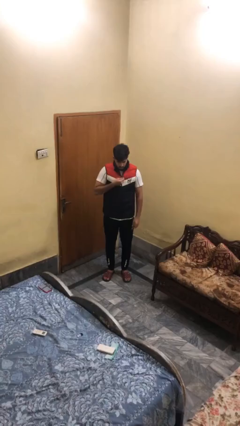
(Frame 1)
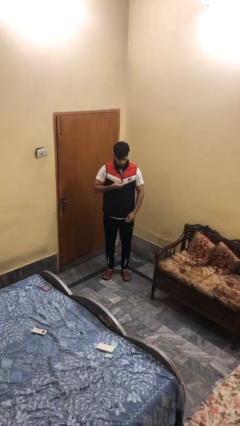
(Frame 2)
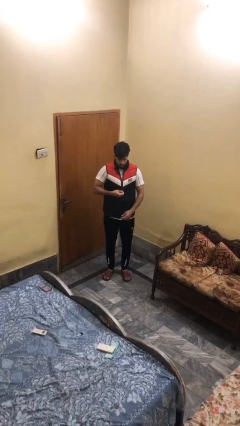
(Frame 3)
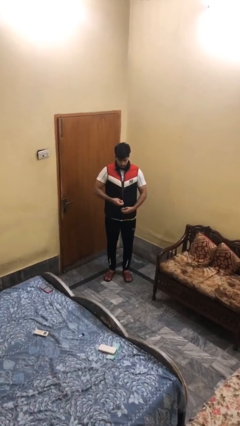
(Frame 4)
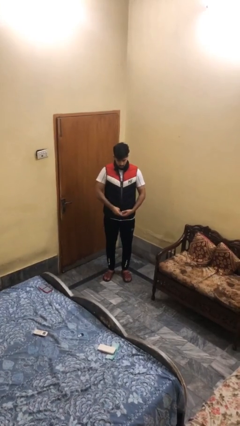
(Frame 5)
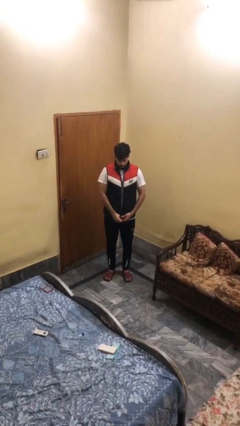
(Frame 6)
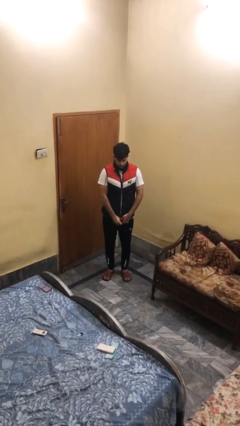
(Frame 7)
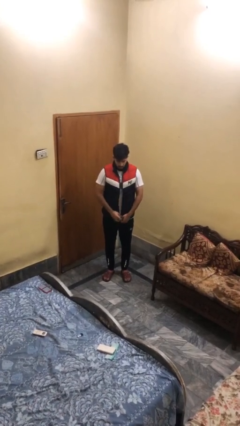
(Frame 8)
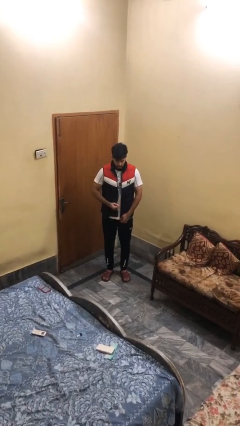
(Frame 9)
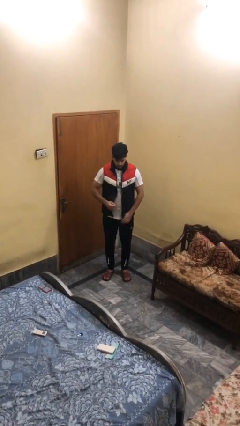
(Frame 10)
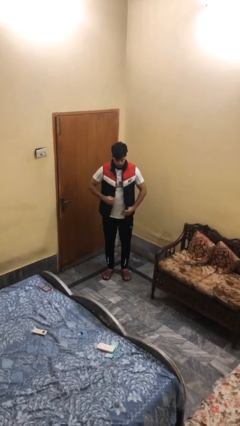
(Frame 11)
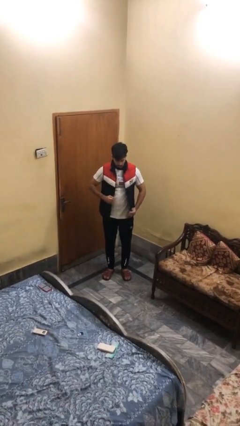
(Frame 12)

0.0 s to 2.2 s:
person unzips jacket

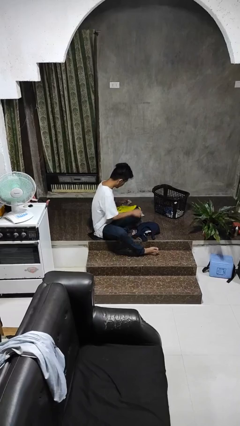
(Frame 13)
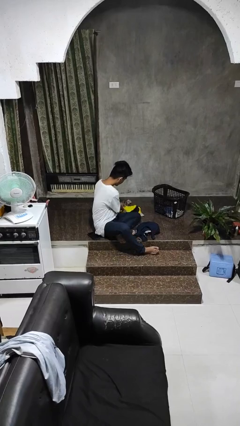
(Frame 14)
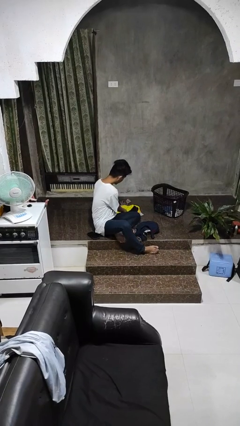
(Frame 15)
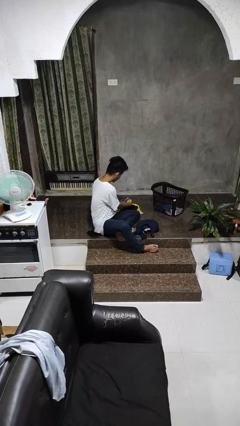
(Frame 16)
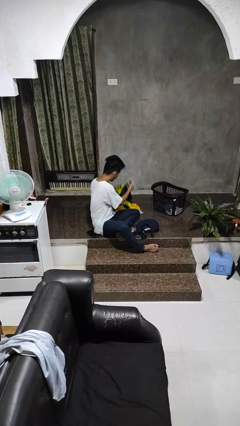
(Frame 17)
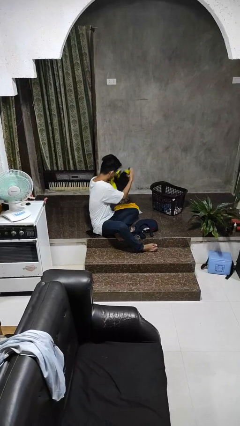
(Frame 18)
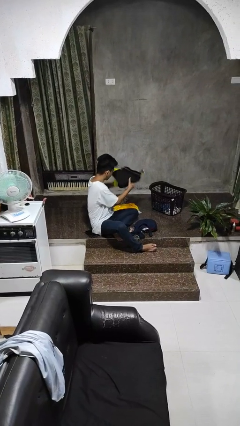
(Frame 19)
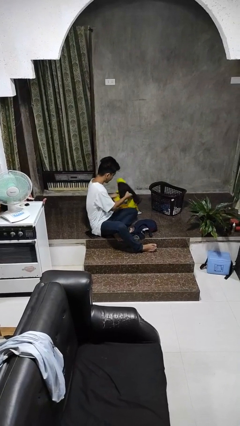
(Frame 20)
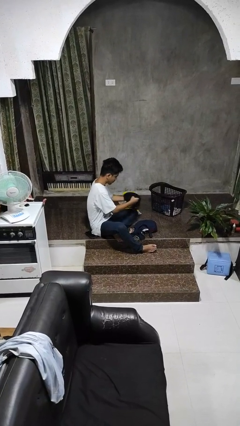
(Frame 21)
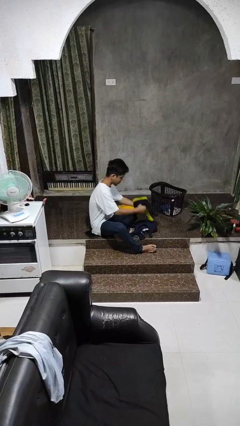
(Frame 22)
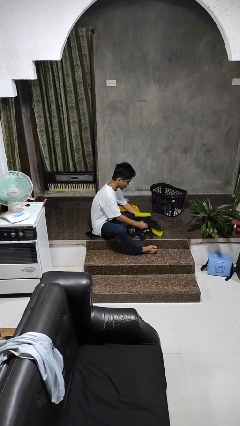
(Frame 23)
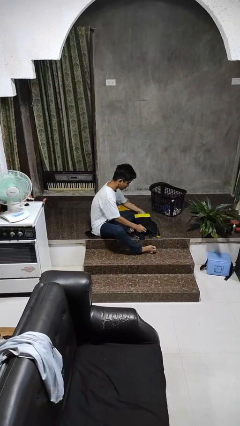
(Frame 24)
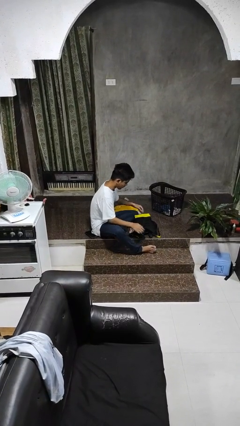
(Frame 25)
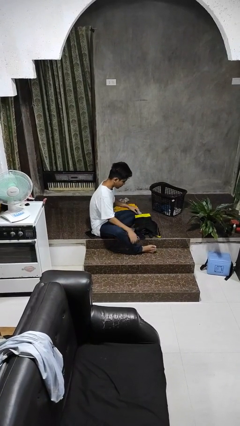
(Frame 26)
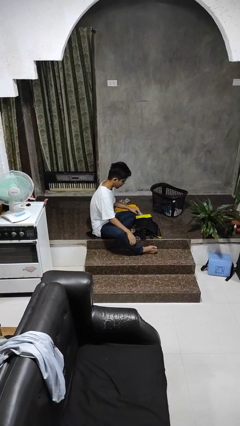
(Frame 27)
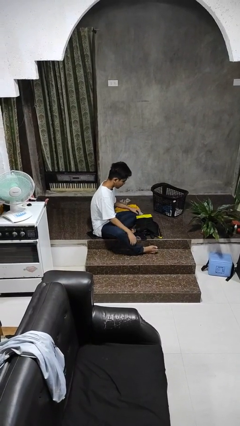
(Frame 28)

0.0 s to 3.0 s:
person folds shirt

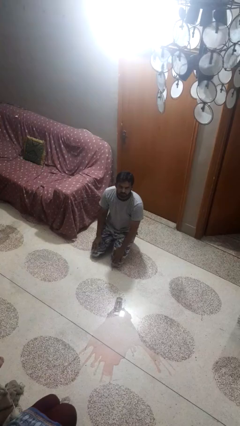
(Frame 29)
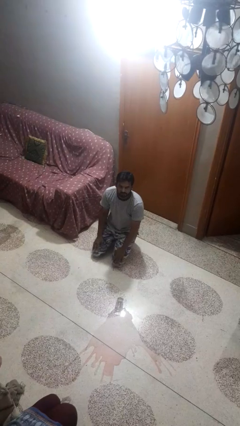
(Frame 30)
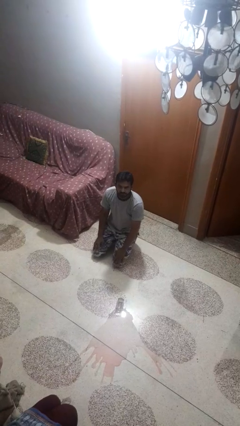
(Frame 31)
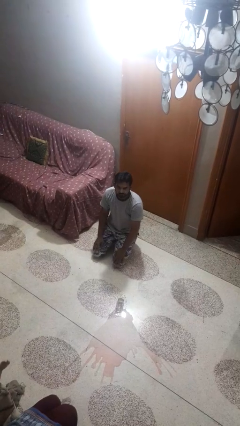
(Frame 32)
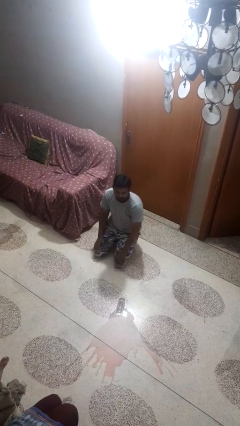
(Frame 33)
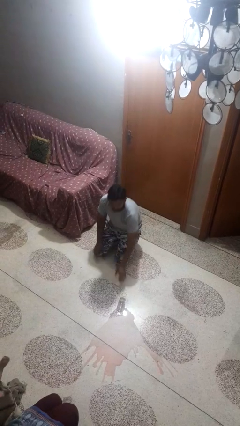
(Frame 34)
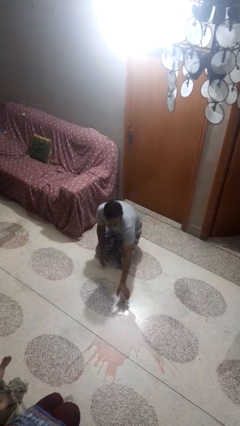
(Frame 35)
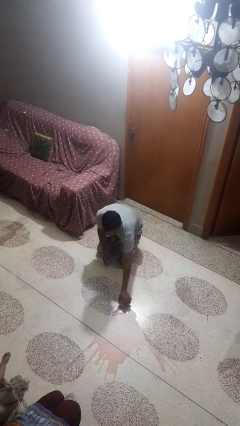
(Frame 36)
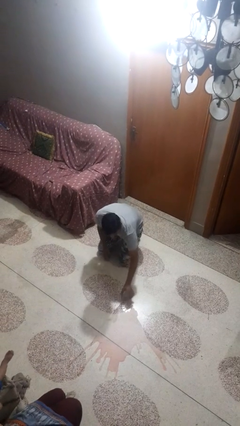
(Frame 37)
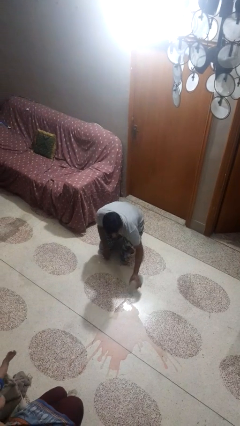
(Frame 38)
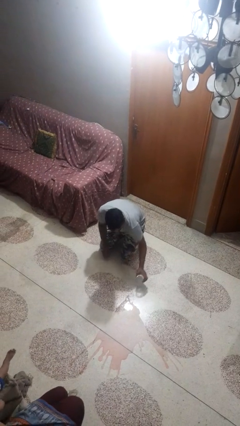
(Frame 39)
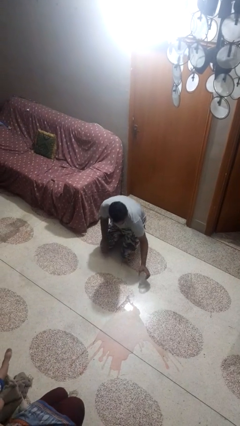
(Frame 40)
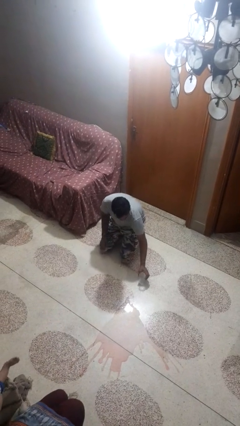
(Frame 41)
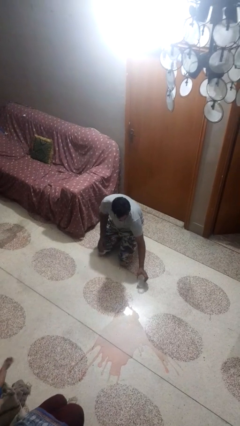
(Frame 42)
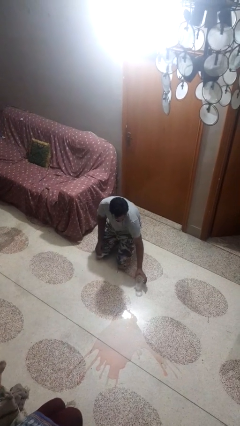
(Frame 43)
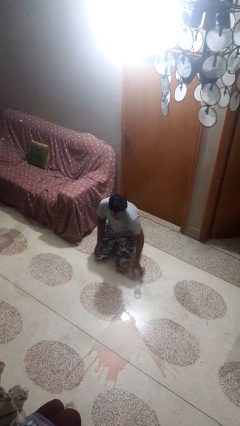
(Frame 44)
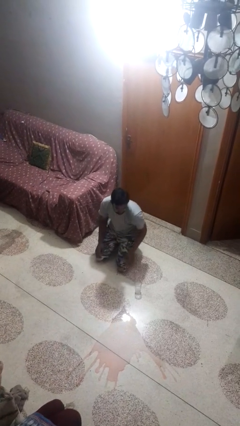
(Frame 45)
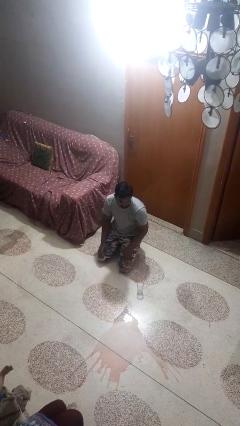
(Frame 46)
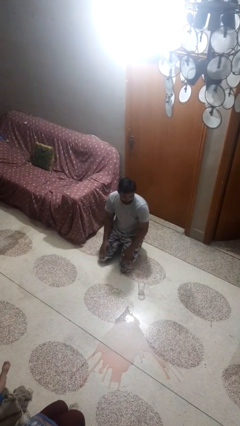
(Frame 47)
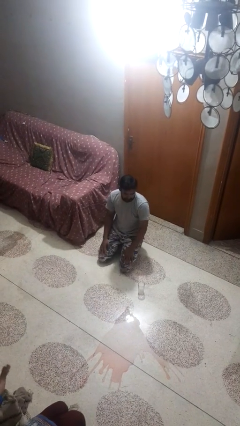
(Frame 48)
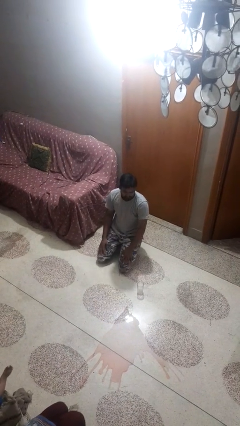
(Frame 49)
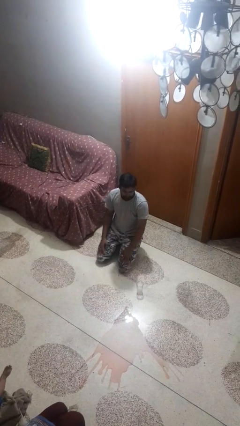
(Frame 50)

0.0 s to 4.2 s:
person sets upright glass

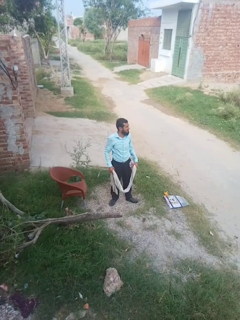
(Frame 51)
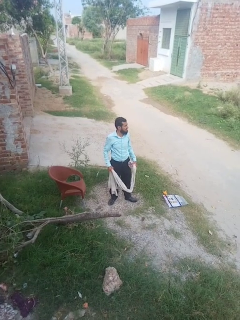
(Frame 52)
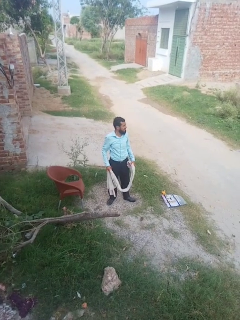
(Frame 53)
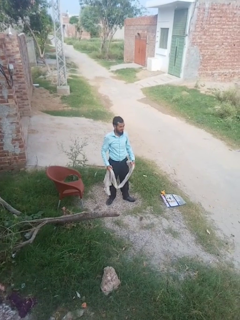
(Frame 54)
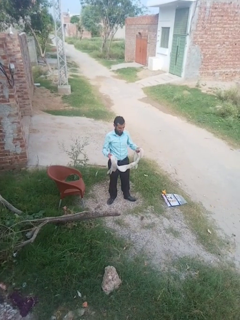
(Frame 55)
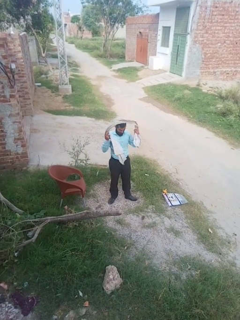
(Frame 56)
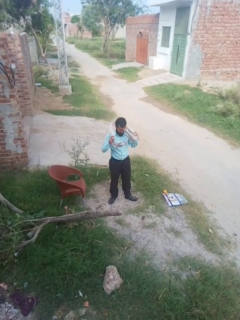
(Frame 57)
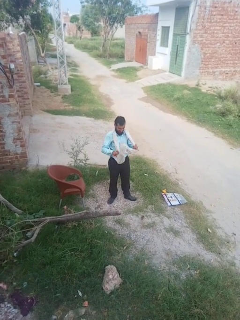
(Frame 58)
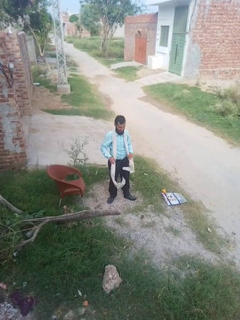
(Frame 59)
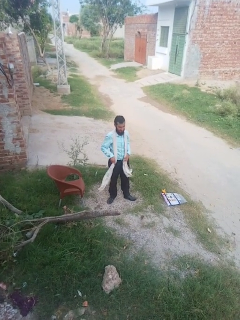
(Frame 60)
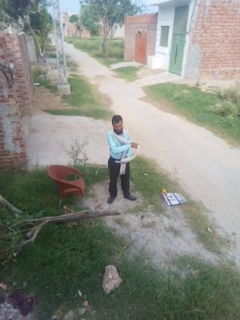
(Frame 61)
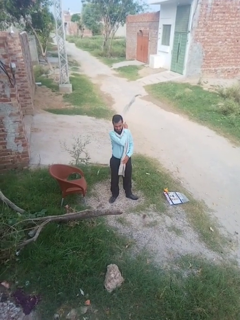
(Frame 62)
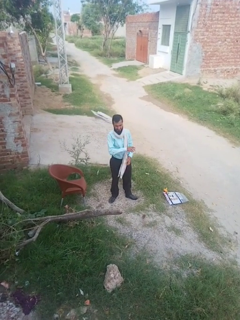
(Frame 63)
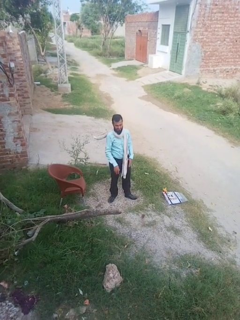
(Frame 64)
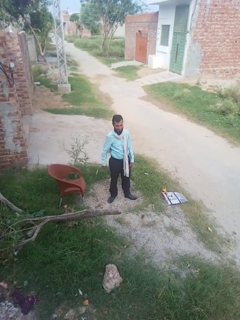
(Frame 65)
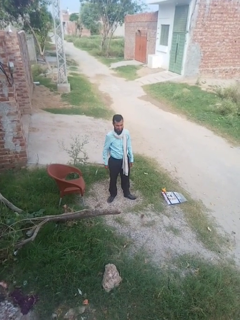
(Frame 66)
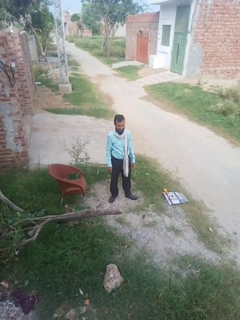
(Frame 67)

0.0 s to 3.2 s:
person puts on scarf

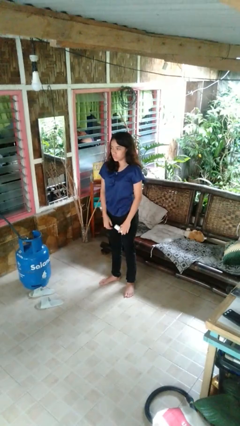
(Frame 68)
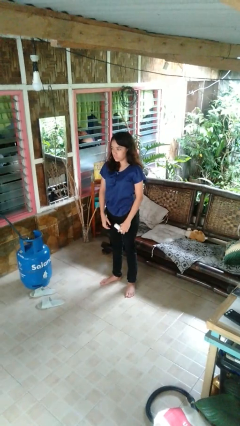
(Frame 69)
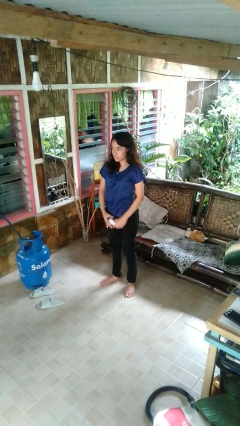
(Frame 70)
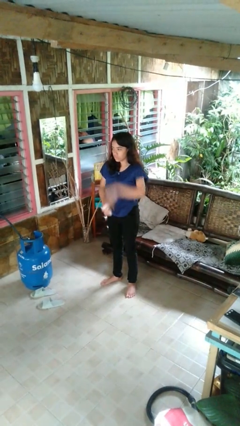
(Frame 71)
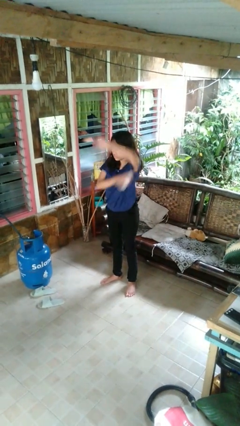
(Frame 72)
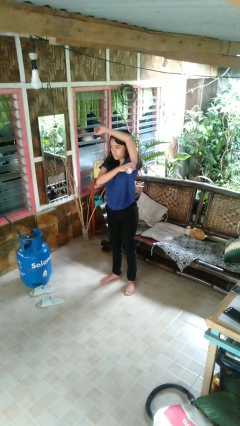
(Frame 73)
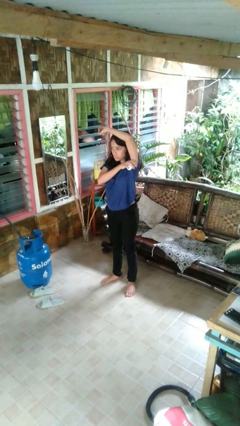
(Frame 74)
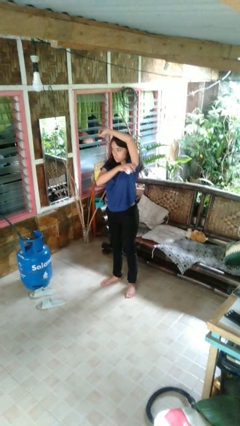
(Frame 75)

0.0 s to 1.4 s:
person applies deodorant

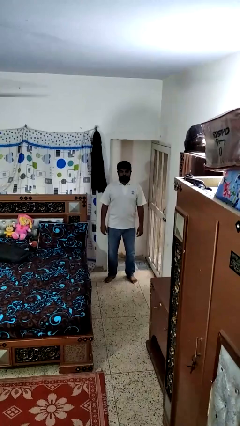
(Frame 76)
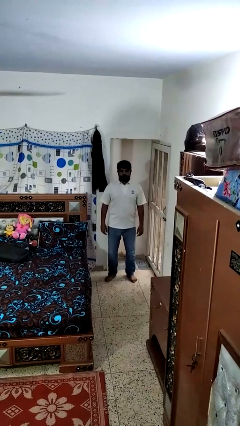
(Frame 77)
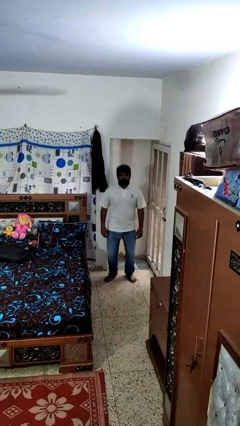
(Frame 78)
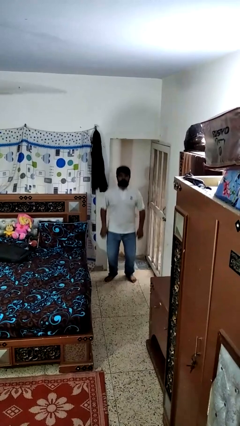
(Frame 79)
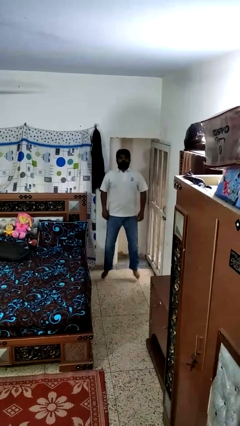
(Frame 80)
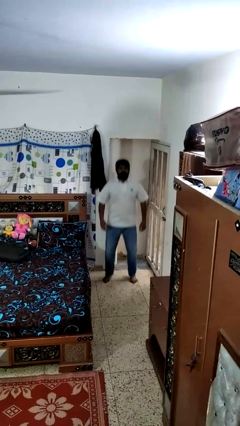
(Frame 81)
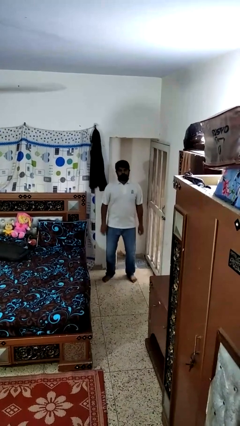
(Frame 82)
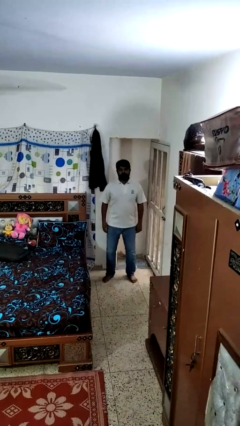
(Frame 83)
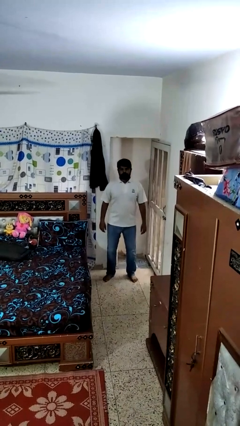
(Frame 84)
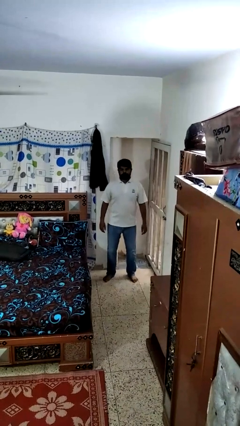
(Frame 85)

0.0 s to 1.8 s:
person jumps

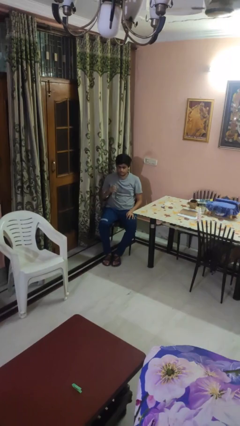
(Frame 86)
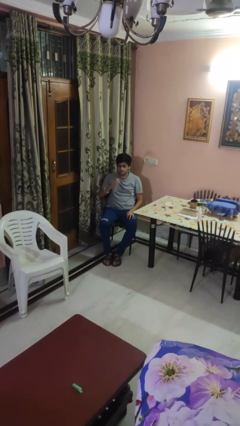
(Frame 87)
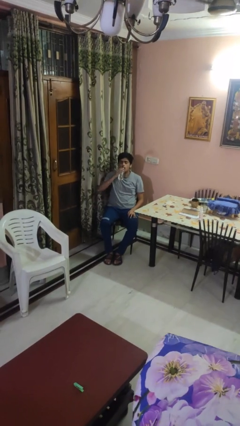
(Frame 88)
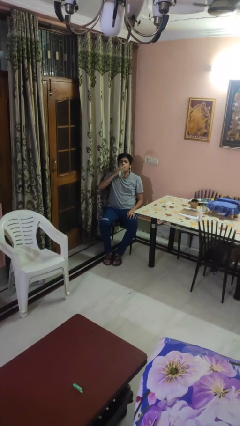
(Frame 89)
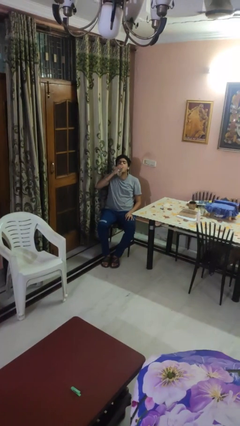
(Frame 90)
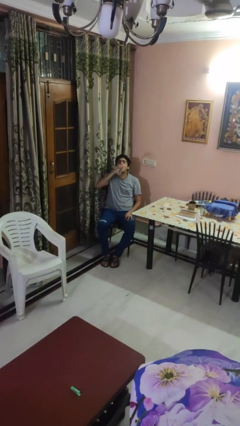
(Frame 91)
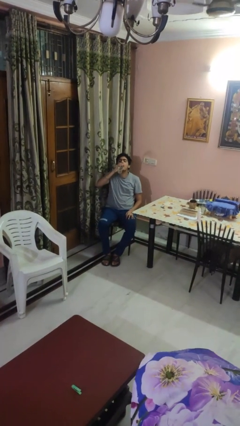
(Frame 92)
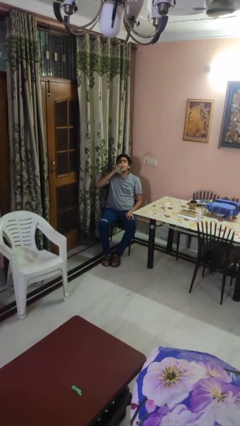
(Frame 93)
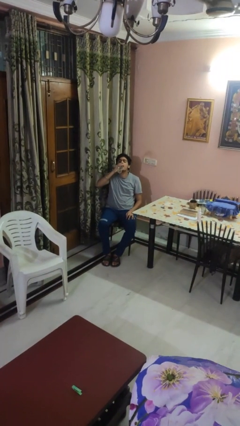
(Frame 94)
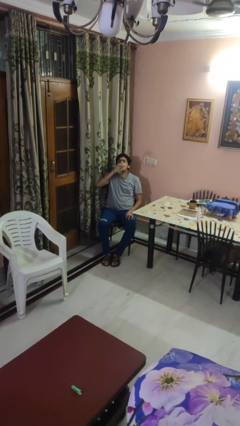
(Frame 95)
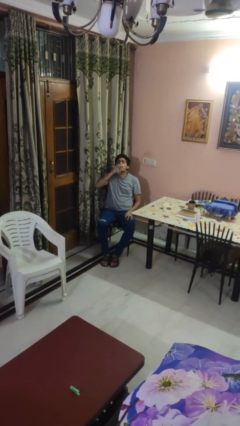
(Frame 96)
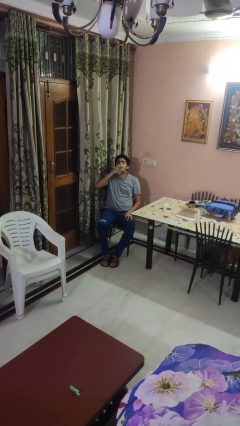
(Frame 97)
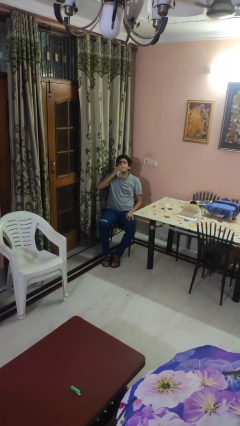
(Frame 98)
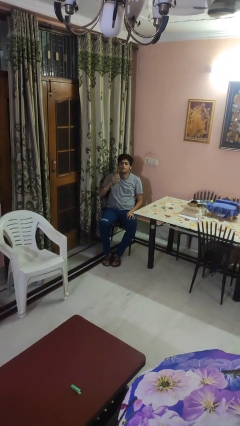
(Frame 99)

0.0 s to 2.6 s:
person drinks from bottle
